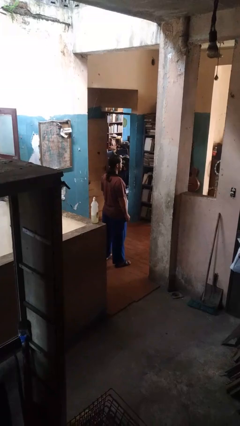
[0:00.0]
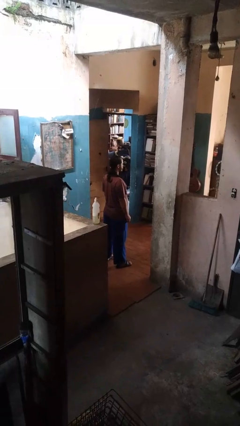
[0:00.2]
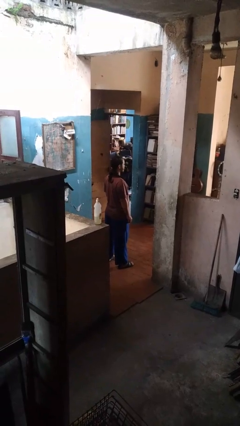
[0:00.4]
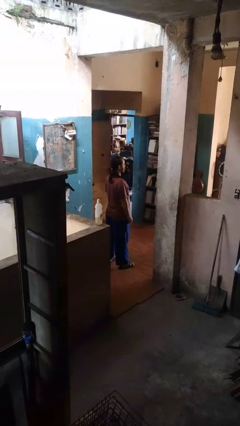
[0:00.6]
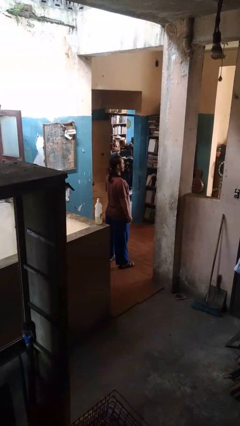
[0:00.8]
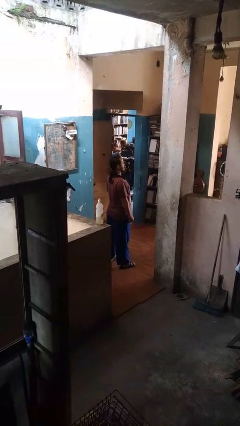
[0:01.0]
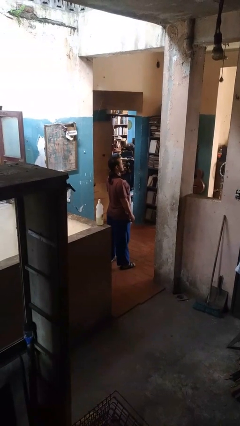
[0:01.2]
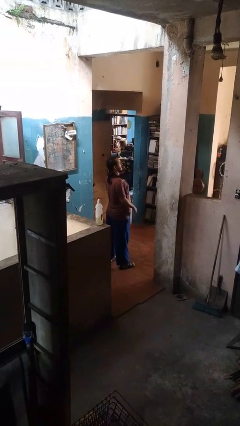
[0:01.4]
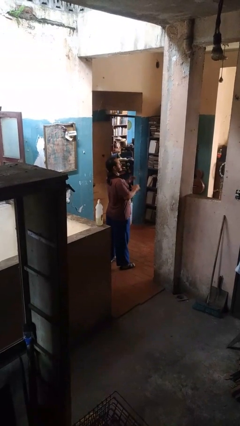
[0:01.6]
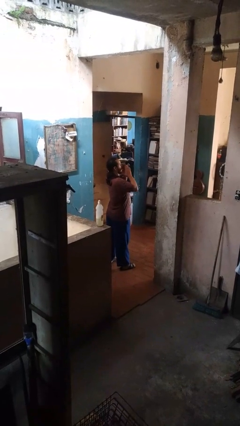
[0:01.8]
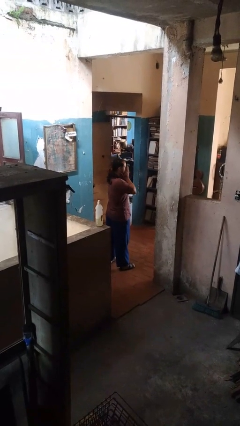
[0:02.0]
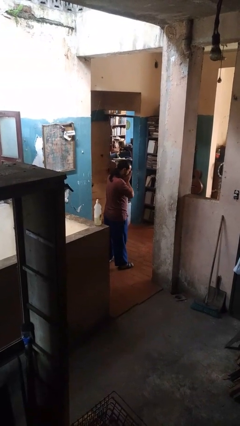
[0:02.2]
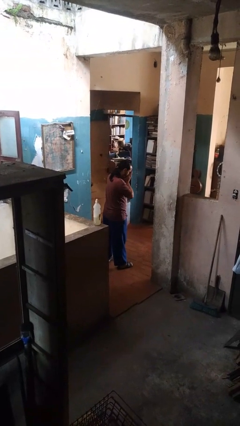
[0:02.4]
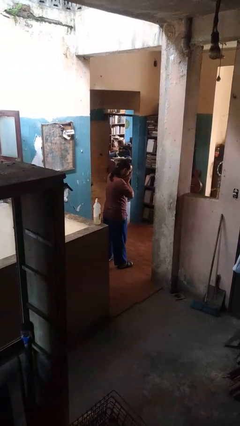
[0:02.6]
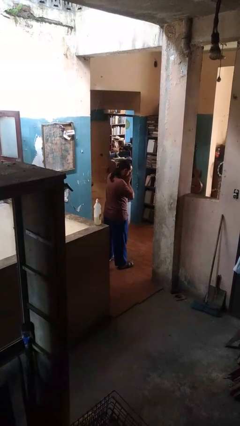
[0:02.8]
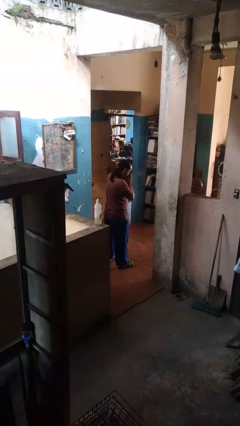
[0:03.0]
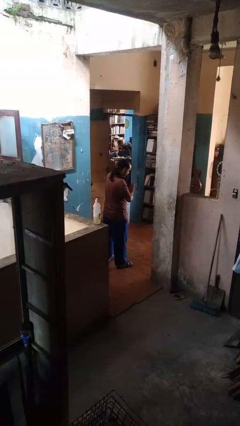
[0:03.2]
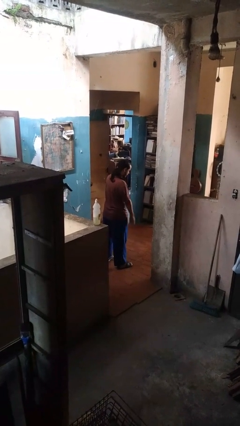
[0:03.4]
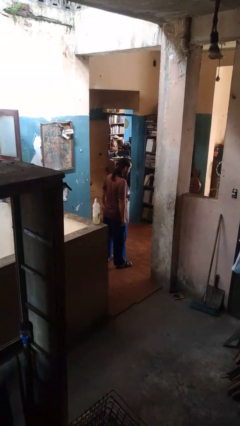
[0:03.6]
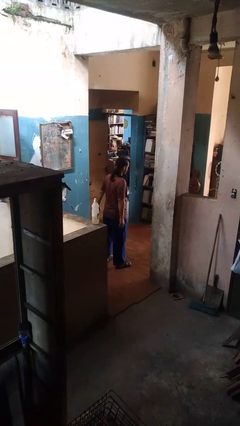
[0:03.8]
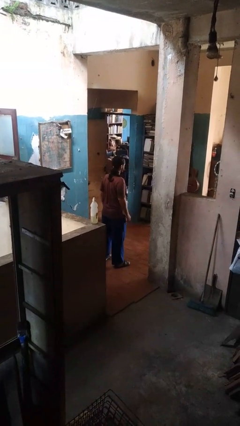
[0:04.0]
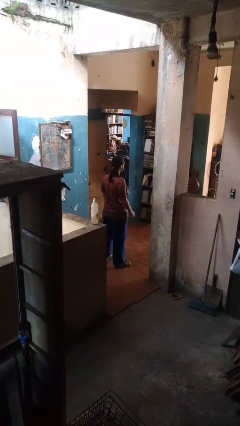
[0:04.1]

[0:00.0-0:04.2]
person sneezes into hand

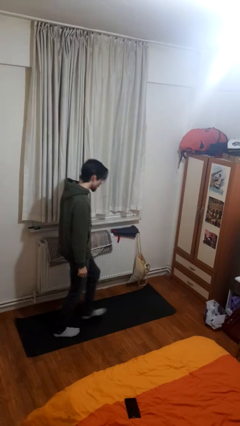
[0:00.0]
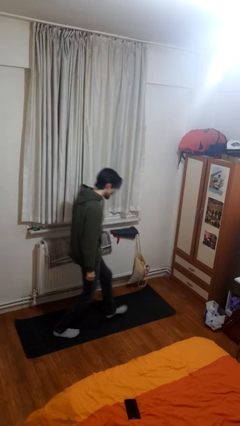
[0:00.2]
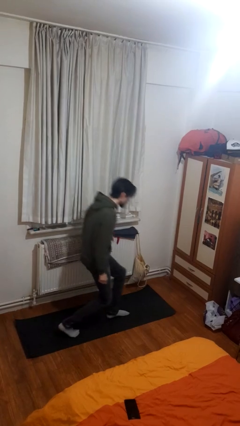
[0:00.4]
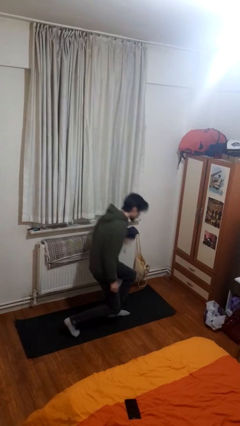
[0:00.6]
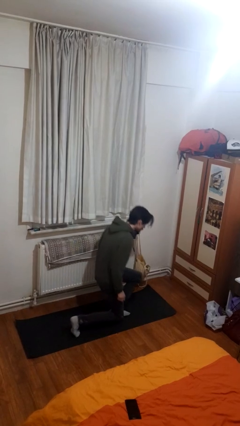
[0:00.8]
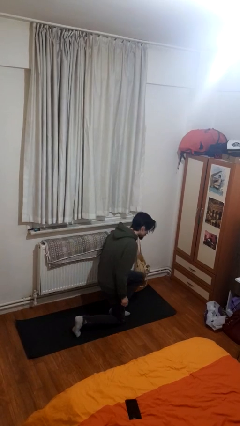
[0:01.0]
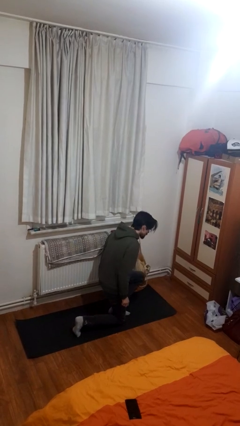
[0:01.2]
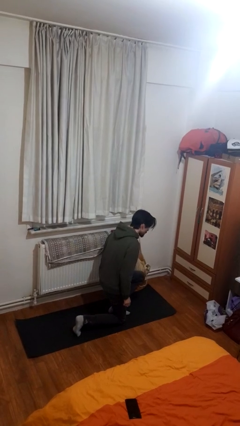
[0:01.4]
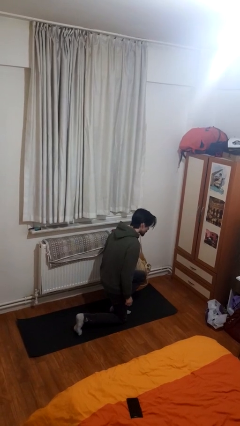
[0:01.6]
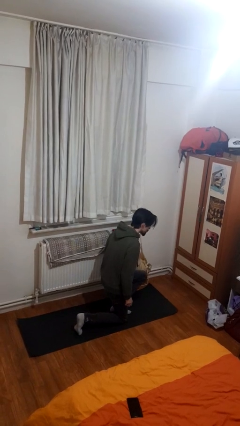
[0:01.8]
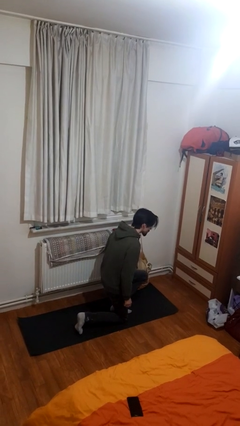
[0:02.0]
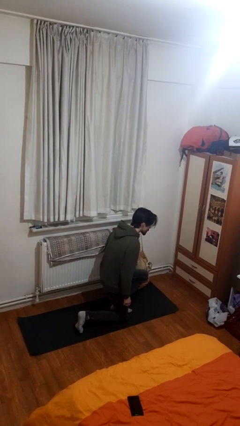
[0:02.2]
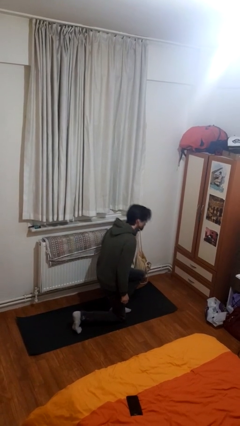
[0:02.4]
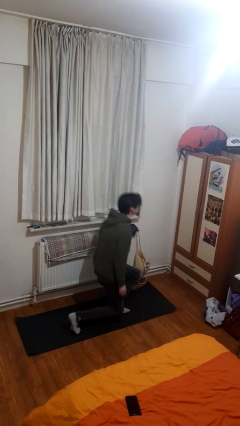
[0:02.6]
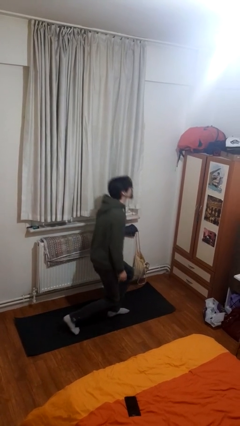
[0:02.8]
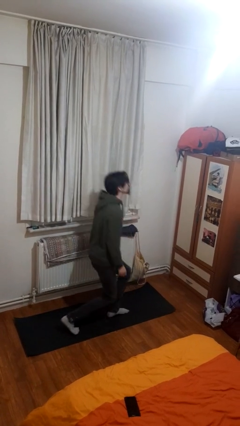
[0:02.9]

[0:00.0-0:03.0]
person kneels

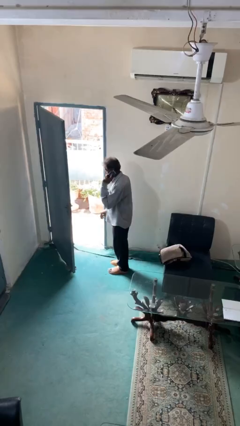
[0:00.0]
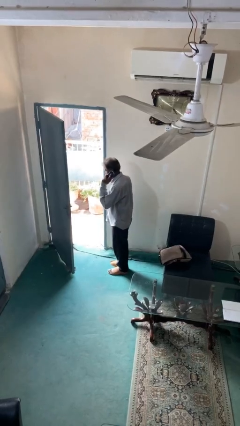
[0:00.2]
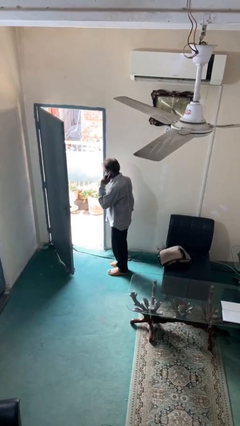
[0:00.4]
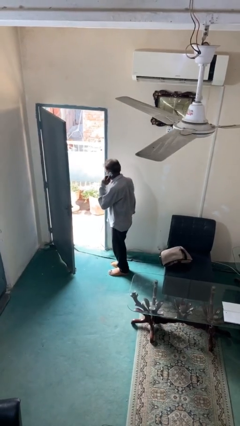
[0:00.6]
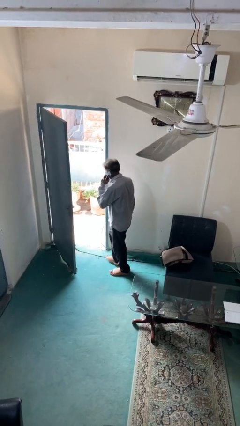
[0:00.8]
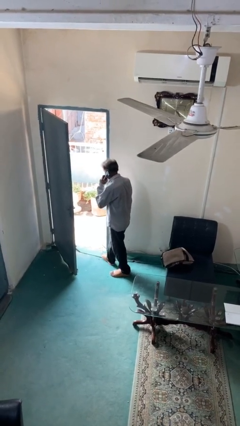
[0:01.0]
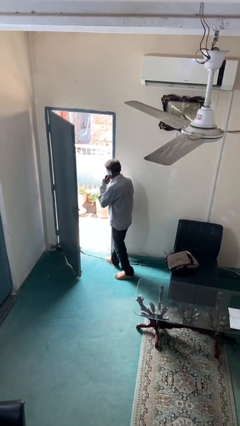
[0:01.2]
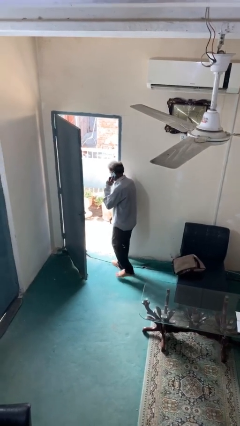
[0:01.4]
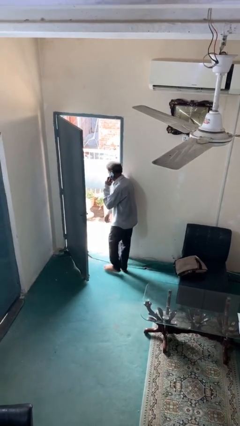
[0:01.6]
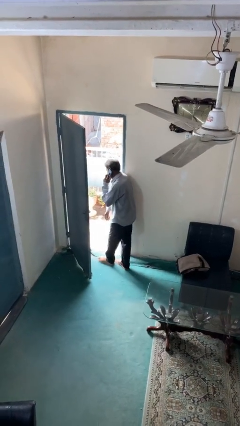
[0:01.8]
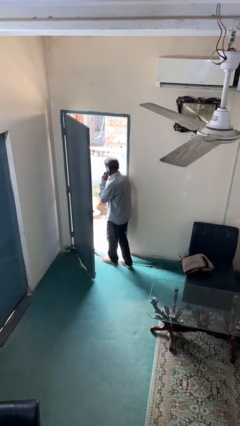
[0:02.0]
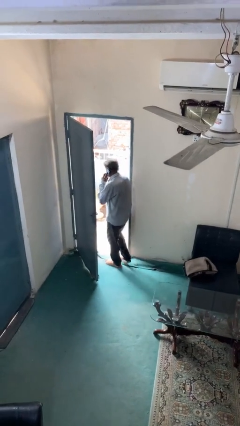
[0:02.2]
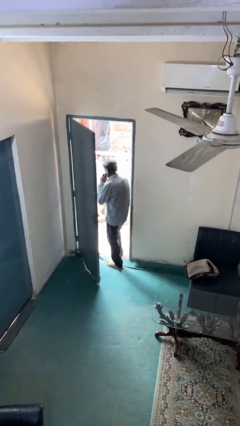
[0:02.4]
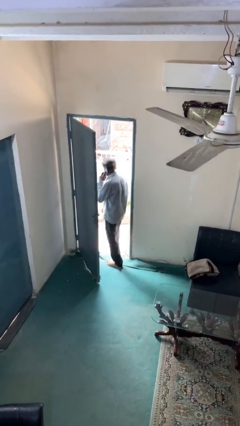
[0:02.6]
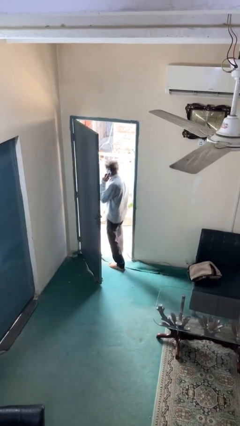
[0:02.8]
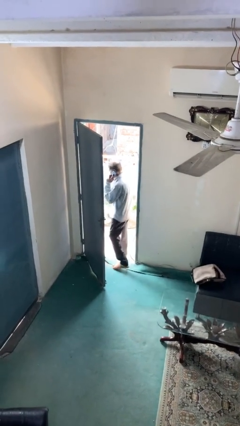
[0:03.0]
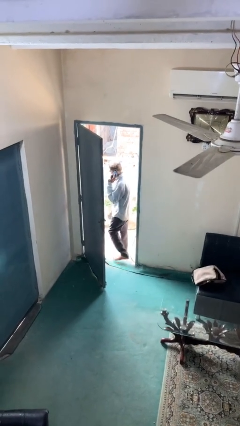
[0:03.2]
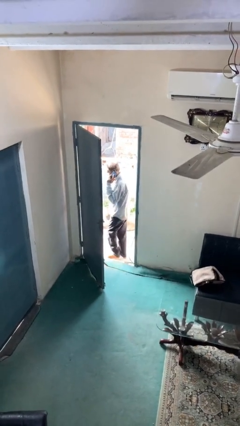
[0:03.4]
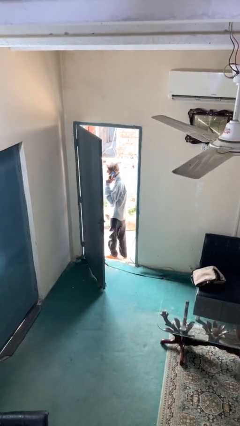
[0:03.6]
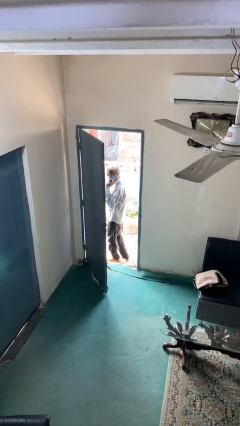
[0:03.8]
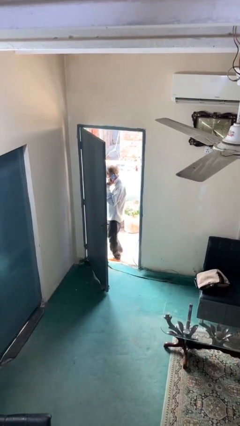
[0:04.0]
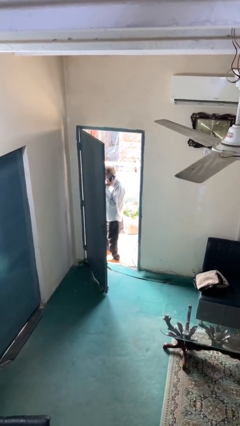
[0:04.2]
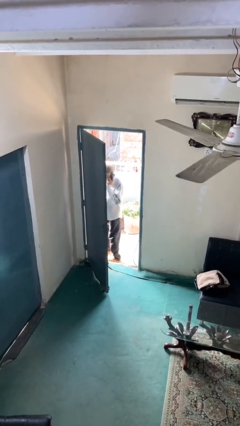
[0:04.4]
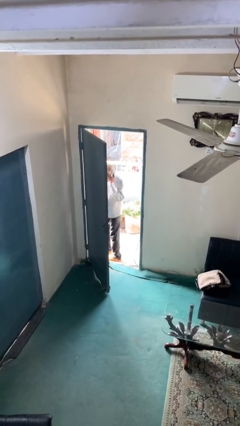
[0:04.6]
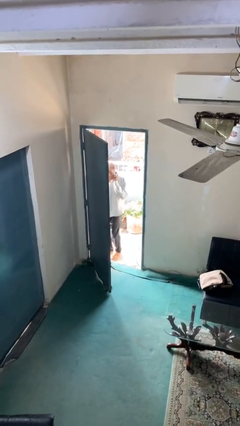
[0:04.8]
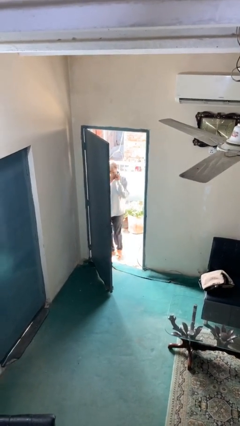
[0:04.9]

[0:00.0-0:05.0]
person exits scene through structure

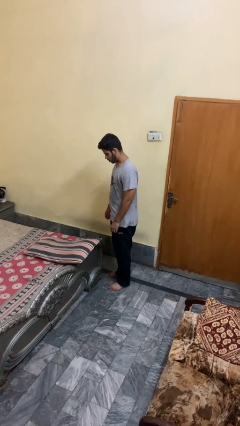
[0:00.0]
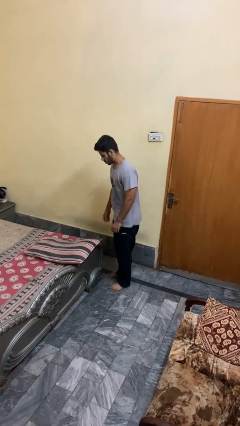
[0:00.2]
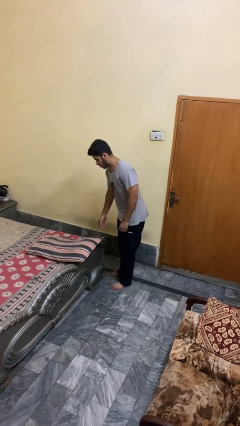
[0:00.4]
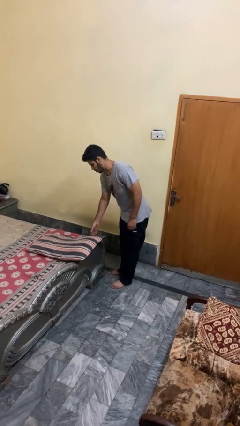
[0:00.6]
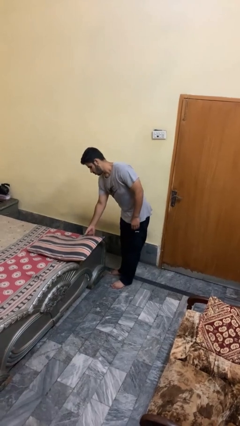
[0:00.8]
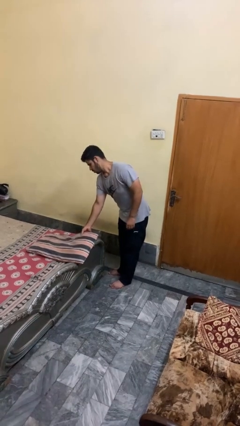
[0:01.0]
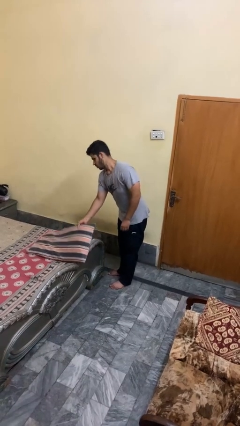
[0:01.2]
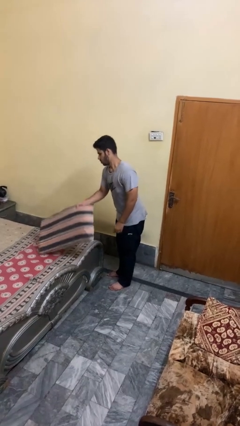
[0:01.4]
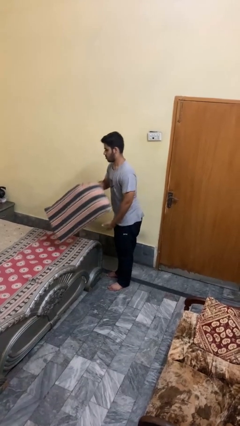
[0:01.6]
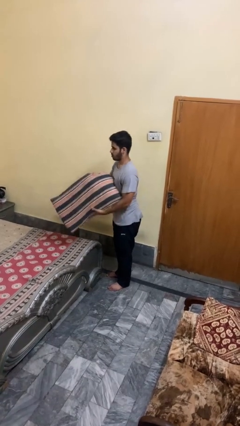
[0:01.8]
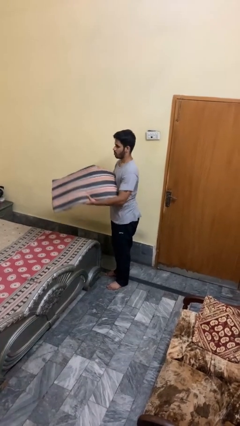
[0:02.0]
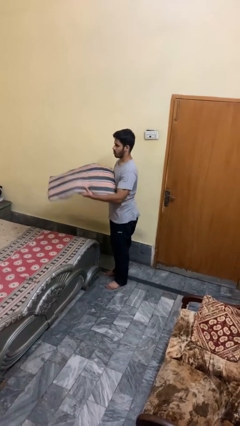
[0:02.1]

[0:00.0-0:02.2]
person picks up object from bed

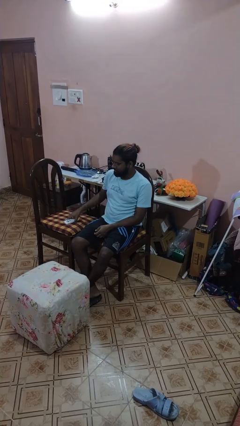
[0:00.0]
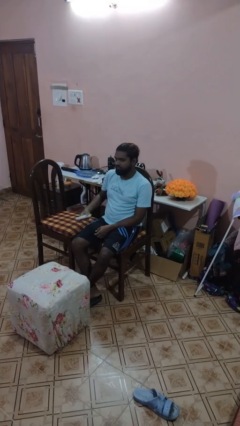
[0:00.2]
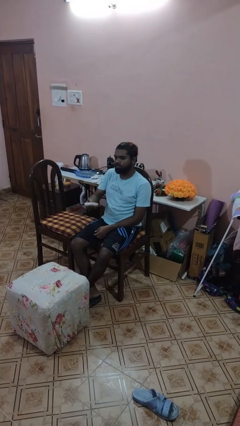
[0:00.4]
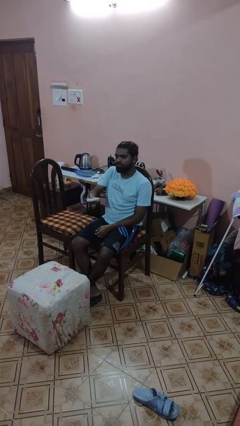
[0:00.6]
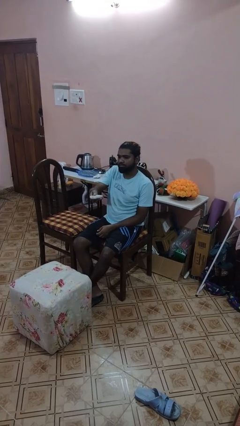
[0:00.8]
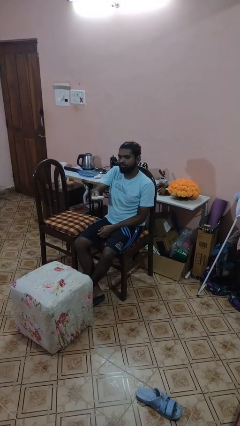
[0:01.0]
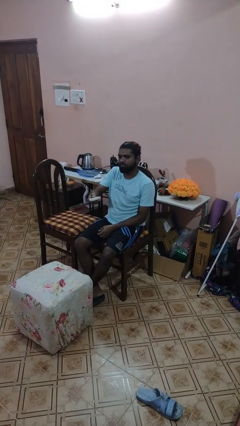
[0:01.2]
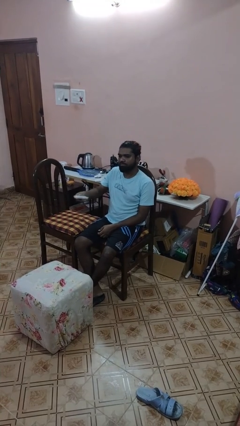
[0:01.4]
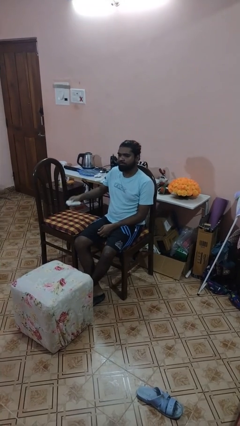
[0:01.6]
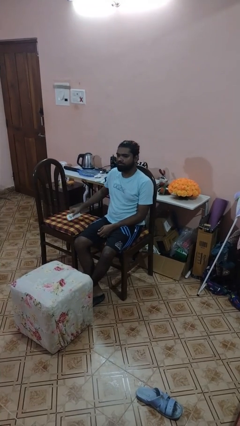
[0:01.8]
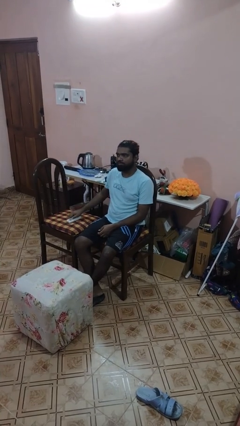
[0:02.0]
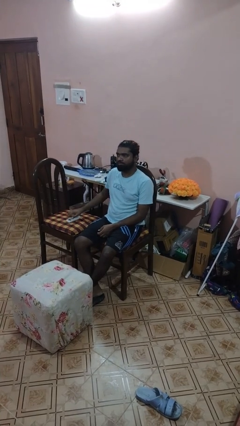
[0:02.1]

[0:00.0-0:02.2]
person uses television remote

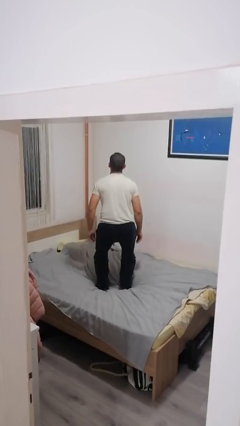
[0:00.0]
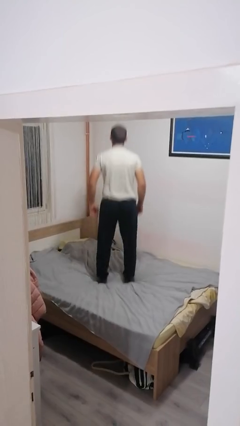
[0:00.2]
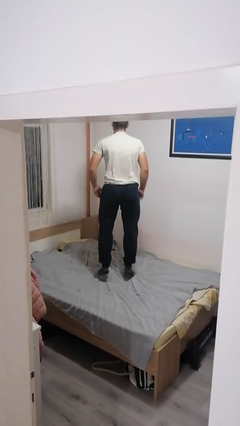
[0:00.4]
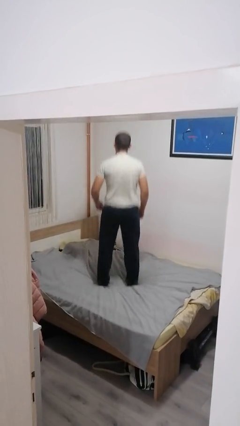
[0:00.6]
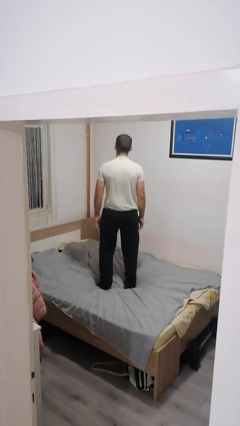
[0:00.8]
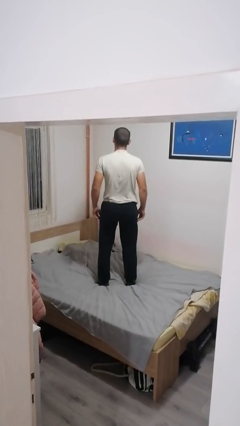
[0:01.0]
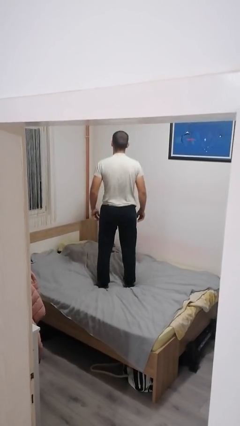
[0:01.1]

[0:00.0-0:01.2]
person jumps on bed
